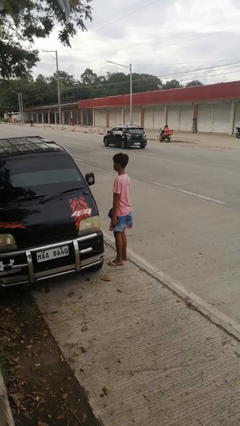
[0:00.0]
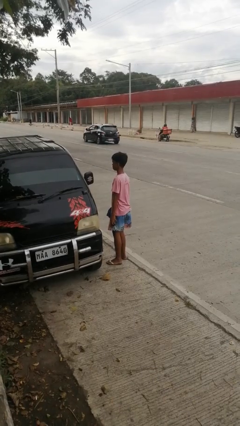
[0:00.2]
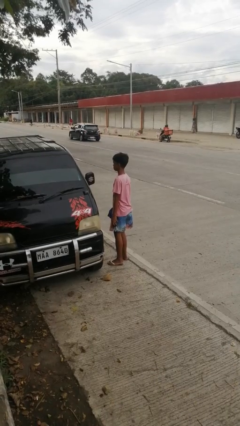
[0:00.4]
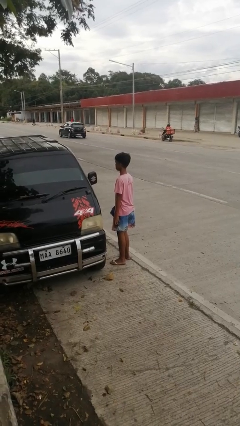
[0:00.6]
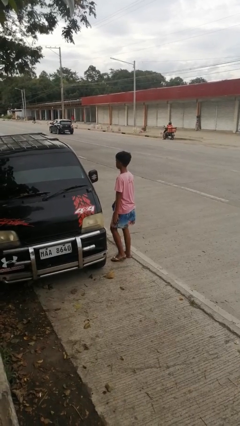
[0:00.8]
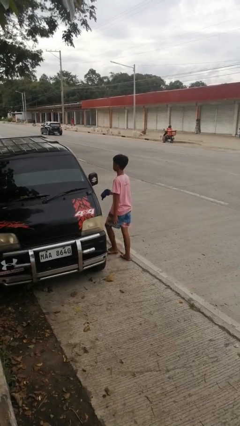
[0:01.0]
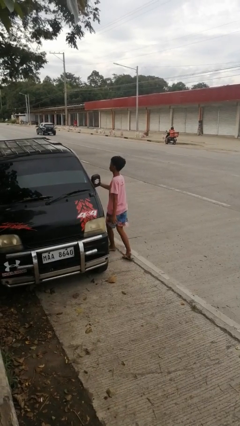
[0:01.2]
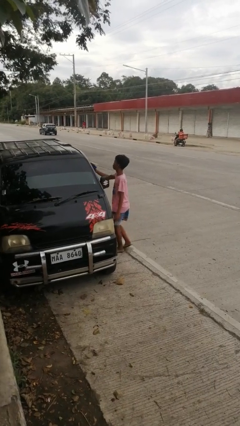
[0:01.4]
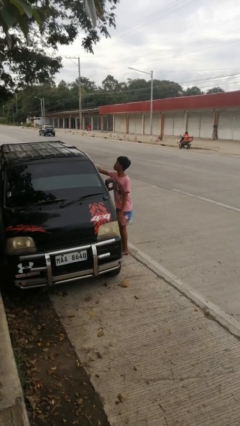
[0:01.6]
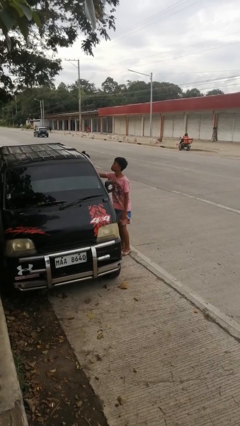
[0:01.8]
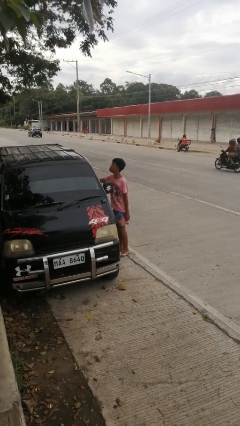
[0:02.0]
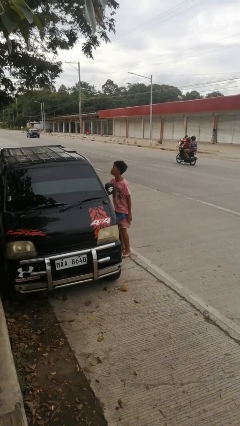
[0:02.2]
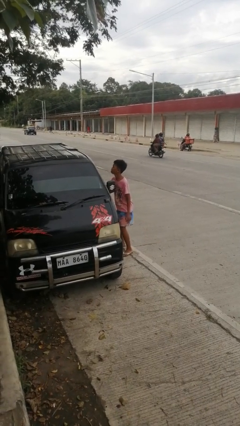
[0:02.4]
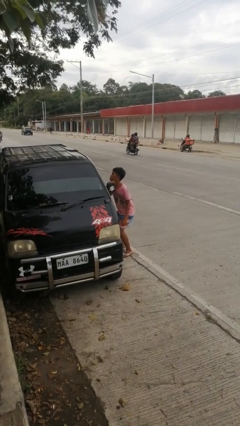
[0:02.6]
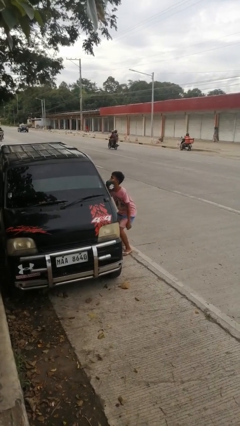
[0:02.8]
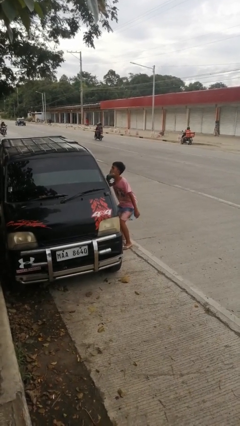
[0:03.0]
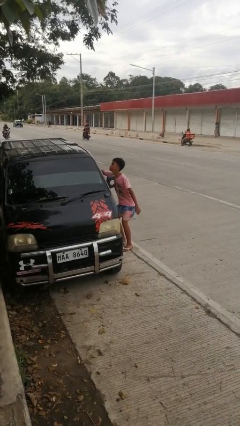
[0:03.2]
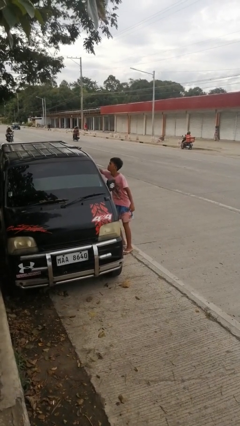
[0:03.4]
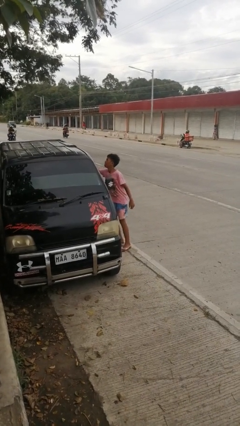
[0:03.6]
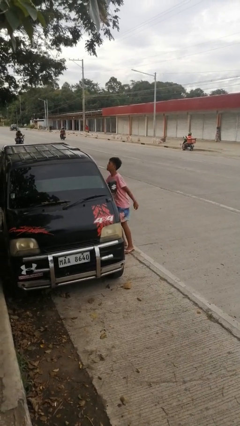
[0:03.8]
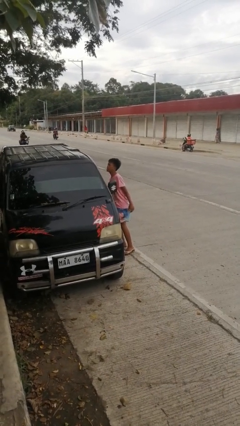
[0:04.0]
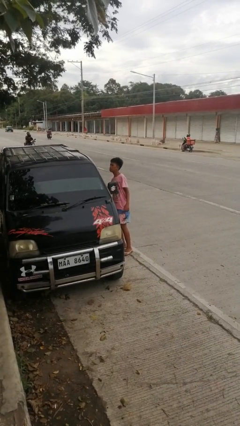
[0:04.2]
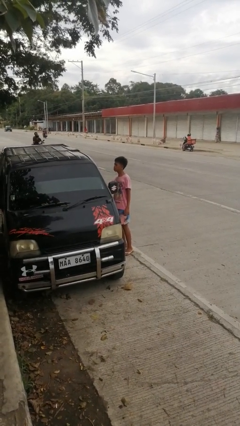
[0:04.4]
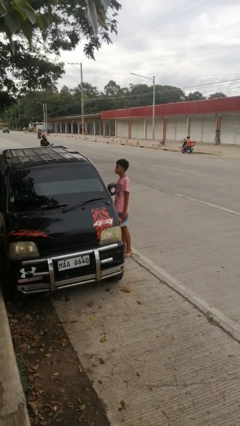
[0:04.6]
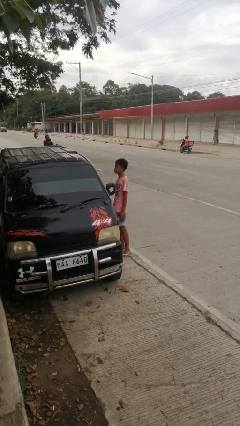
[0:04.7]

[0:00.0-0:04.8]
person polishes car with rag

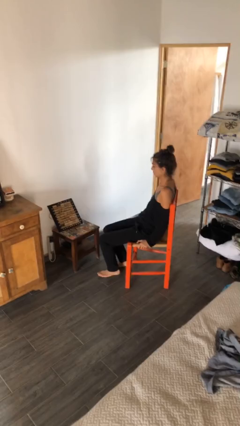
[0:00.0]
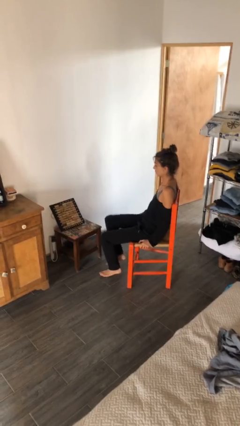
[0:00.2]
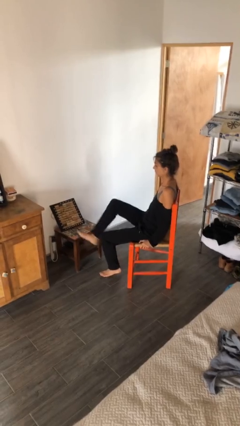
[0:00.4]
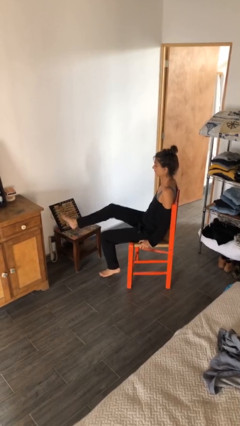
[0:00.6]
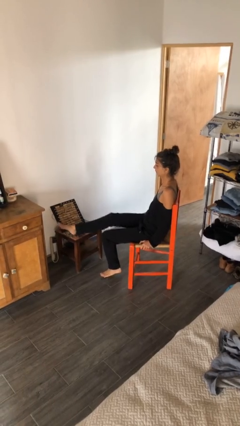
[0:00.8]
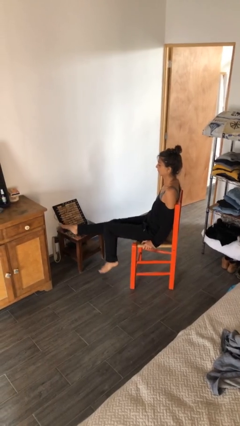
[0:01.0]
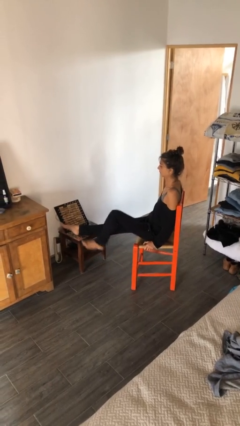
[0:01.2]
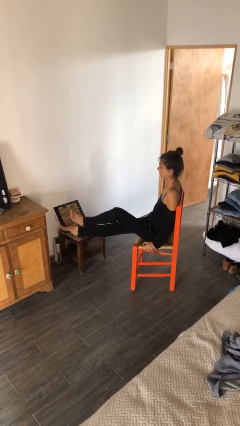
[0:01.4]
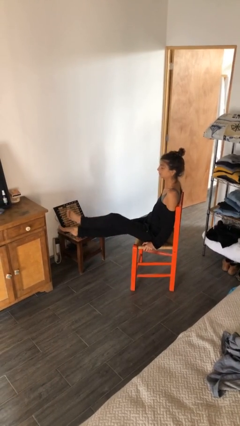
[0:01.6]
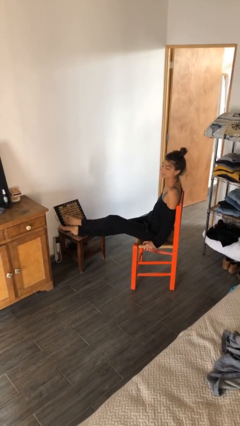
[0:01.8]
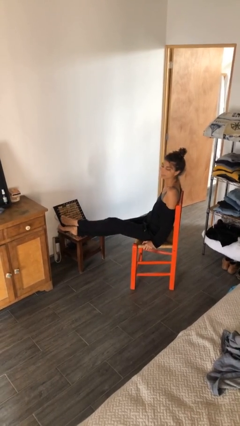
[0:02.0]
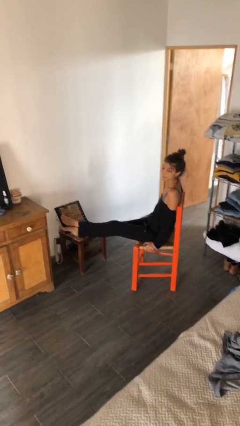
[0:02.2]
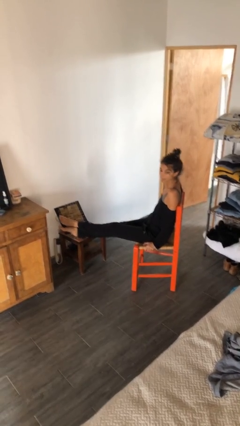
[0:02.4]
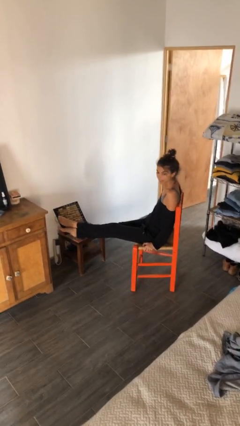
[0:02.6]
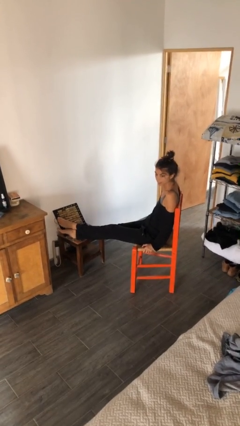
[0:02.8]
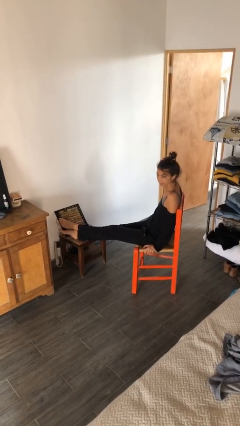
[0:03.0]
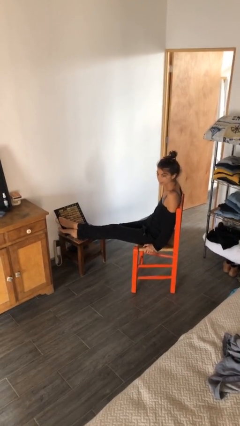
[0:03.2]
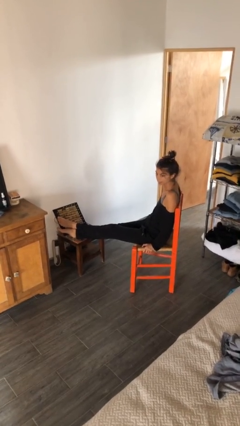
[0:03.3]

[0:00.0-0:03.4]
person puts feet up

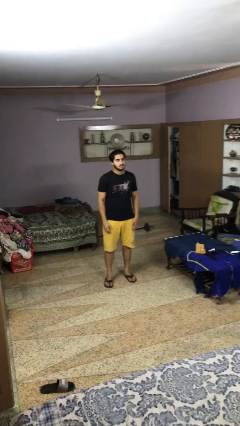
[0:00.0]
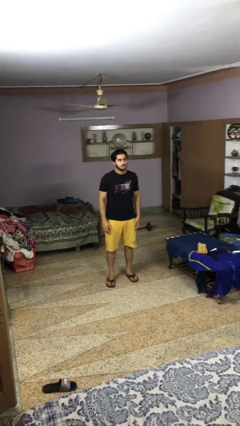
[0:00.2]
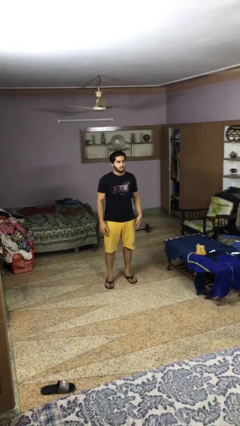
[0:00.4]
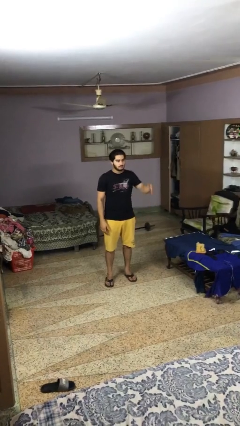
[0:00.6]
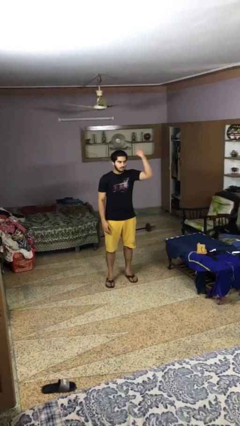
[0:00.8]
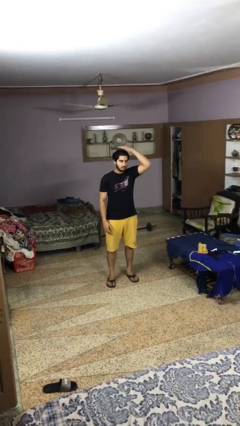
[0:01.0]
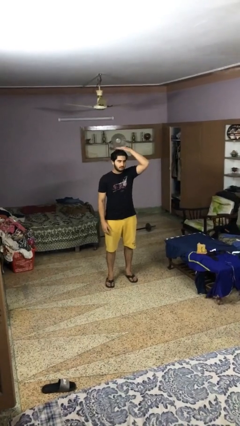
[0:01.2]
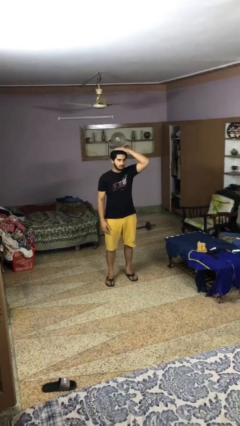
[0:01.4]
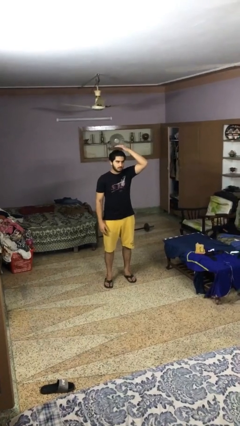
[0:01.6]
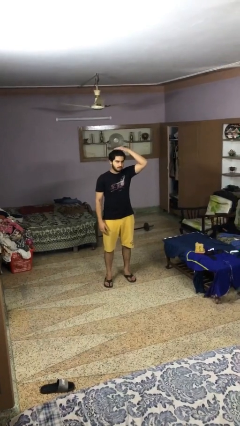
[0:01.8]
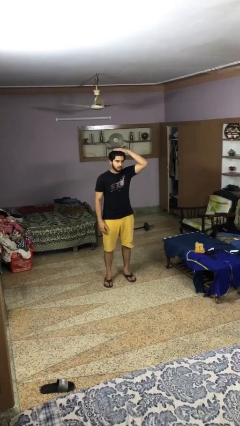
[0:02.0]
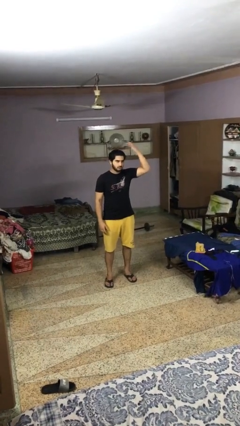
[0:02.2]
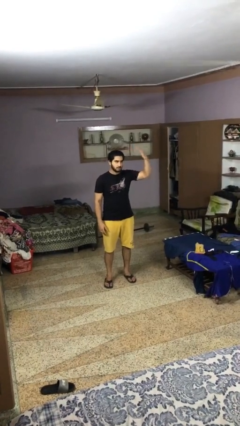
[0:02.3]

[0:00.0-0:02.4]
person pats head

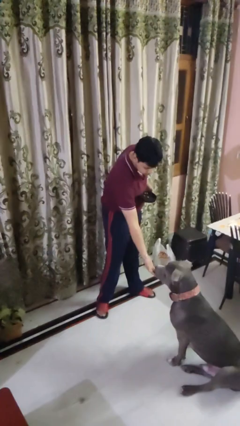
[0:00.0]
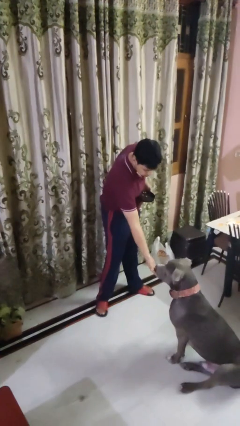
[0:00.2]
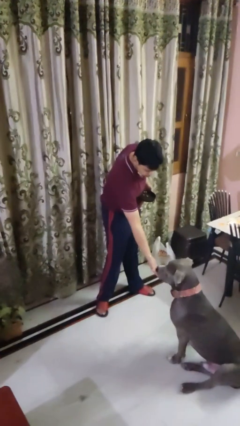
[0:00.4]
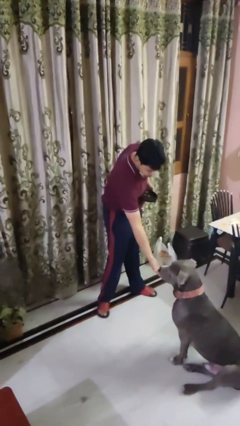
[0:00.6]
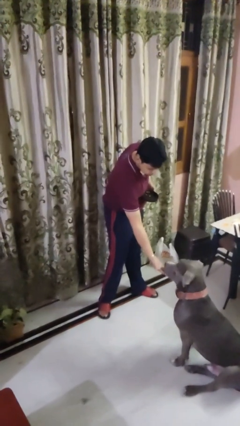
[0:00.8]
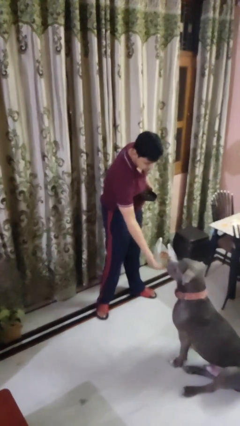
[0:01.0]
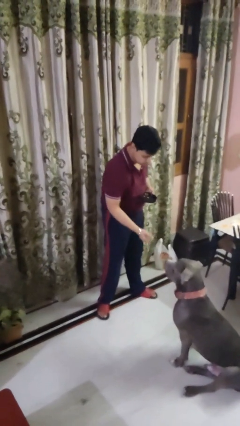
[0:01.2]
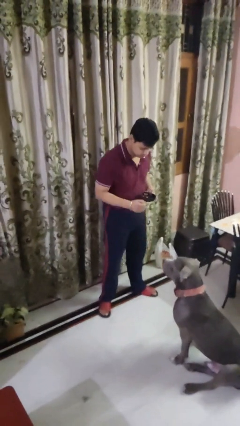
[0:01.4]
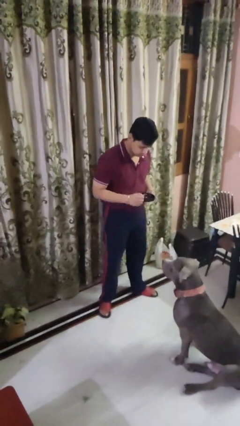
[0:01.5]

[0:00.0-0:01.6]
person feeds dog

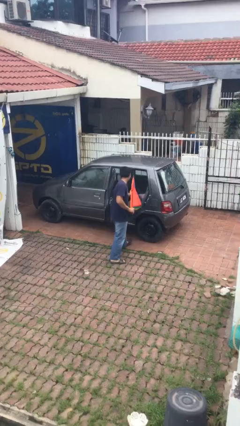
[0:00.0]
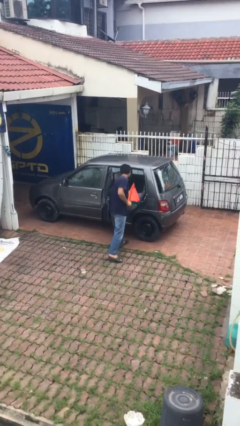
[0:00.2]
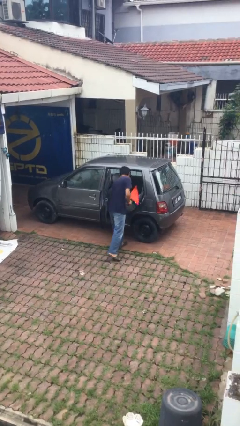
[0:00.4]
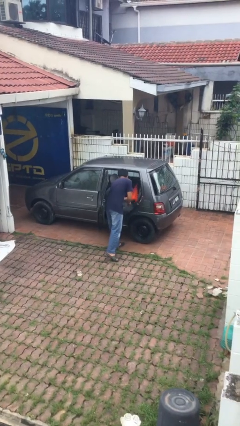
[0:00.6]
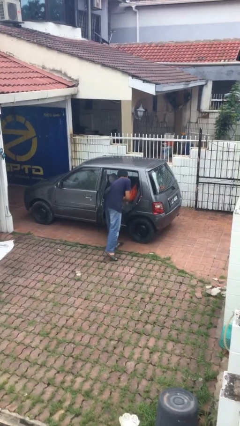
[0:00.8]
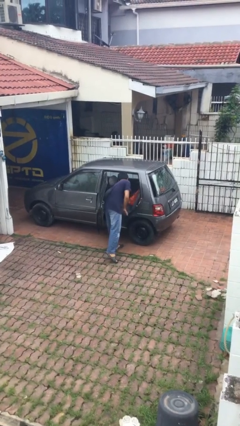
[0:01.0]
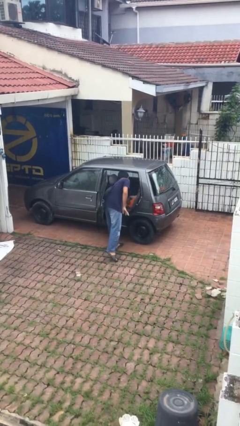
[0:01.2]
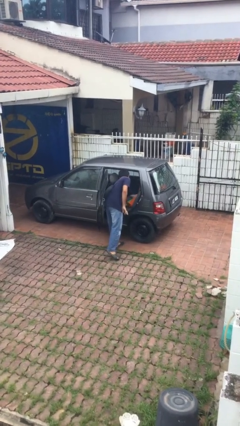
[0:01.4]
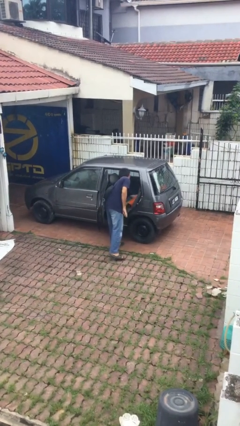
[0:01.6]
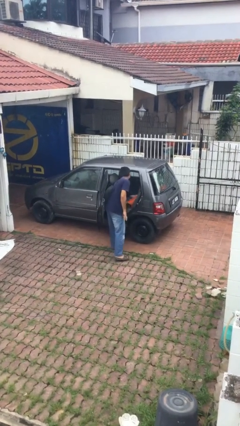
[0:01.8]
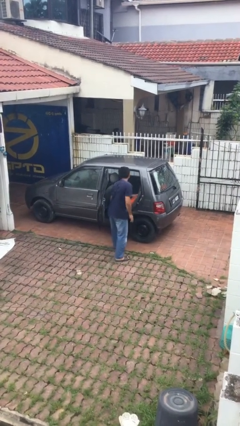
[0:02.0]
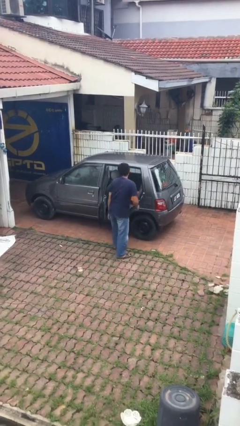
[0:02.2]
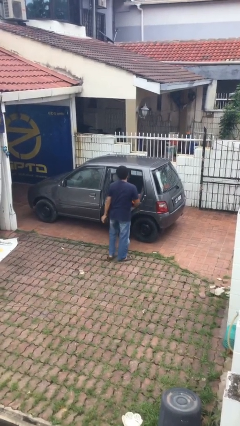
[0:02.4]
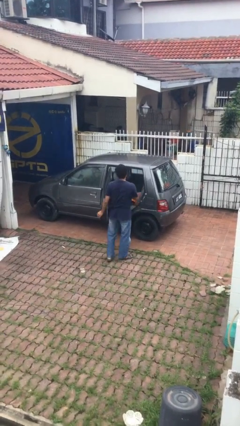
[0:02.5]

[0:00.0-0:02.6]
person loads car

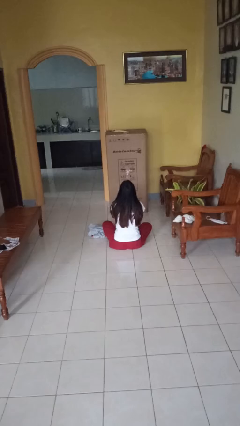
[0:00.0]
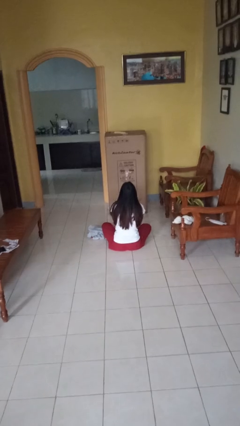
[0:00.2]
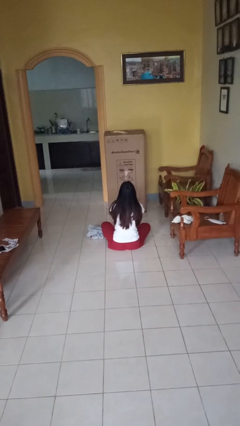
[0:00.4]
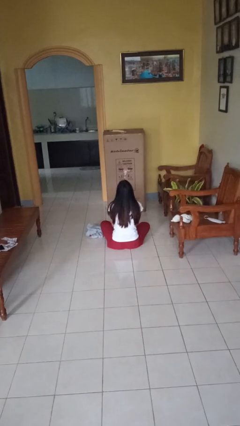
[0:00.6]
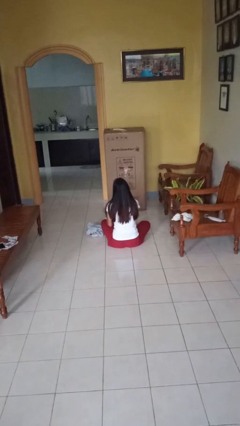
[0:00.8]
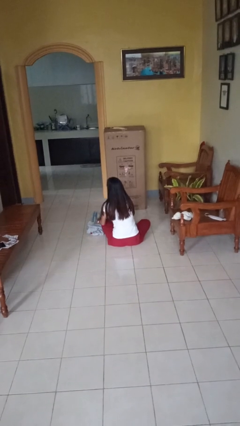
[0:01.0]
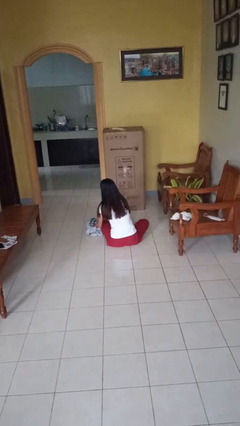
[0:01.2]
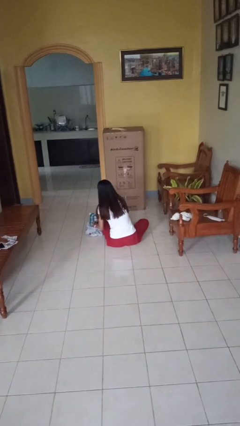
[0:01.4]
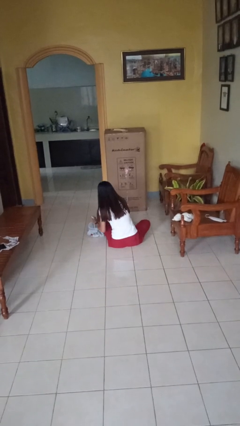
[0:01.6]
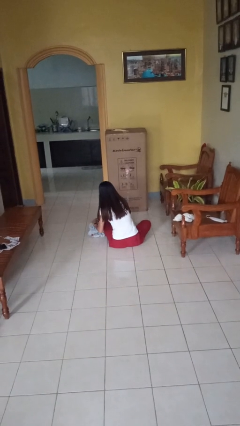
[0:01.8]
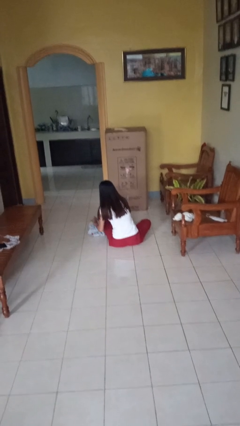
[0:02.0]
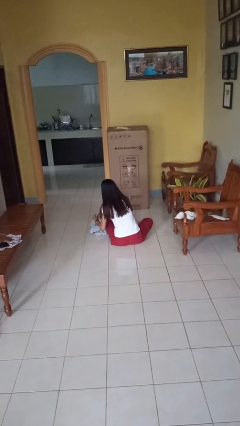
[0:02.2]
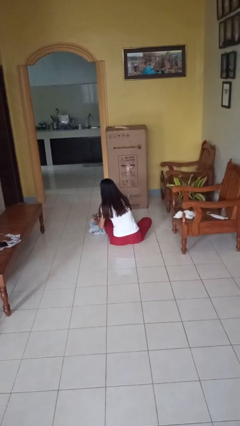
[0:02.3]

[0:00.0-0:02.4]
person folds towel

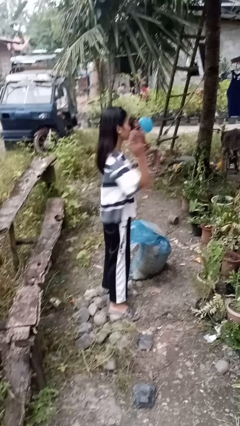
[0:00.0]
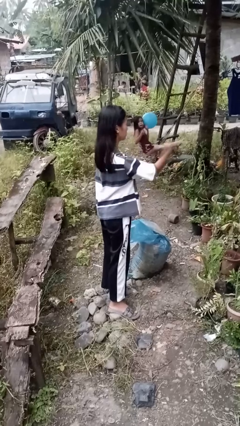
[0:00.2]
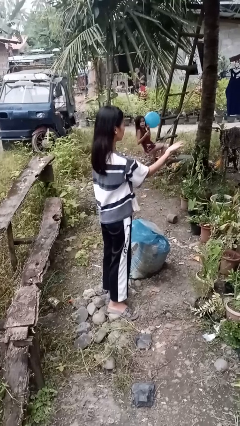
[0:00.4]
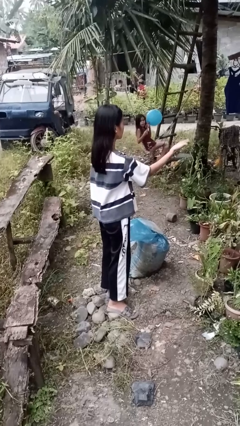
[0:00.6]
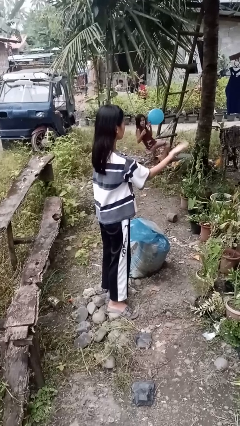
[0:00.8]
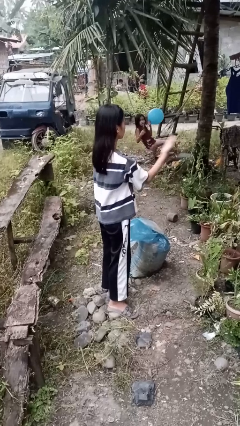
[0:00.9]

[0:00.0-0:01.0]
person karate chop
